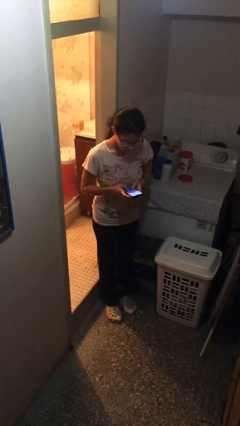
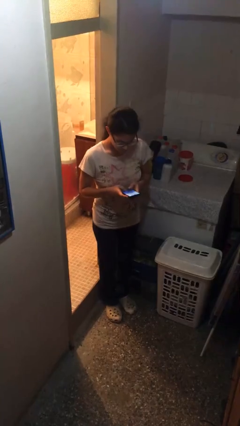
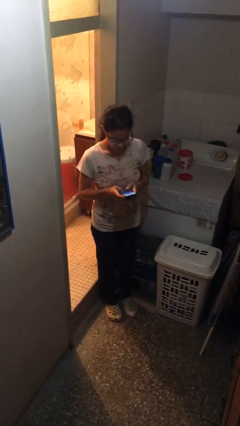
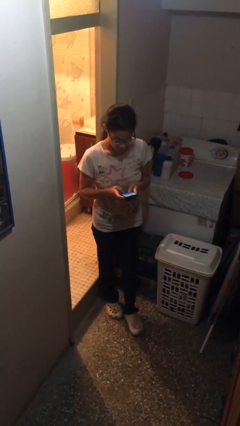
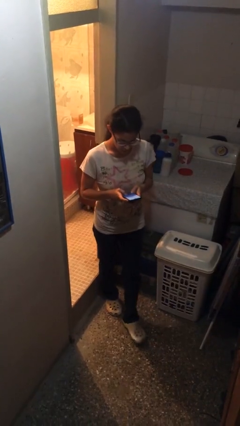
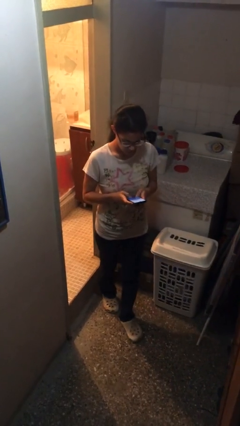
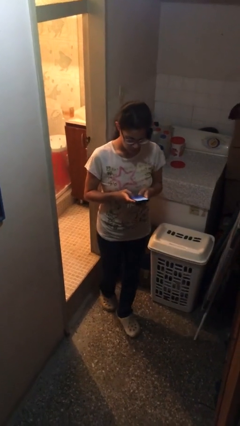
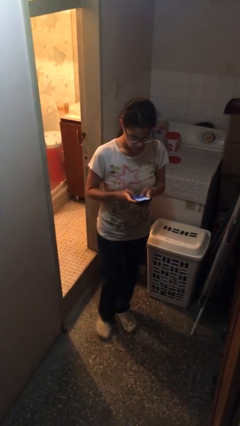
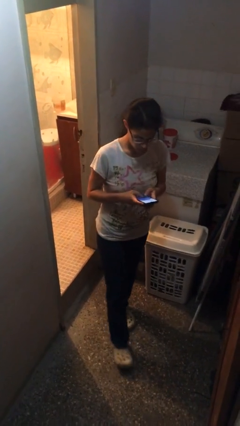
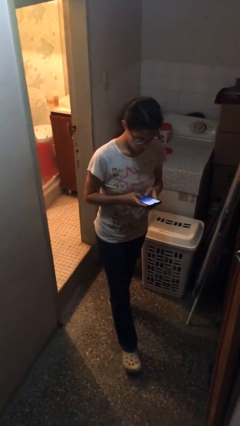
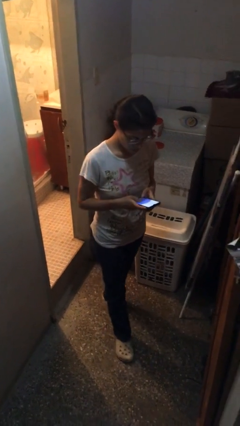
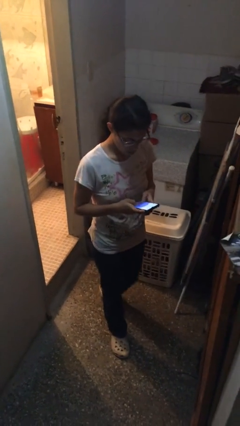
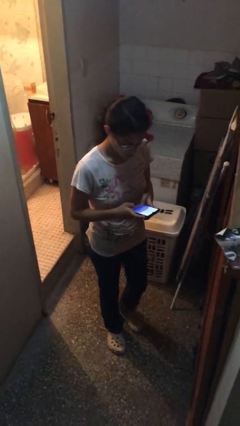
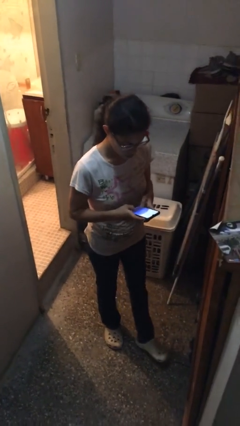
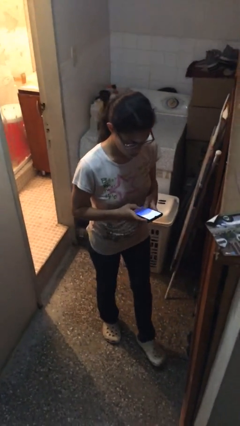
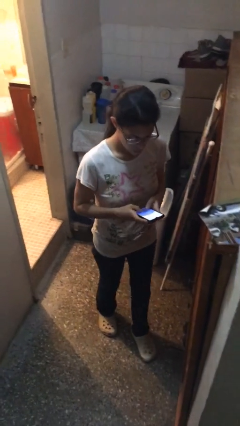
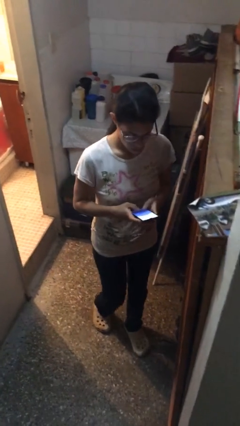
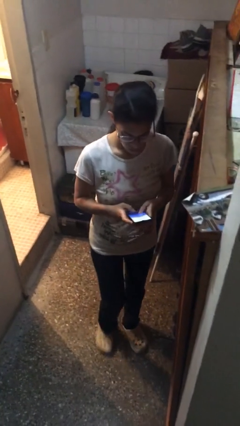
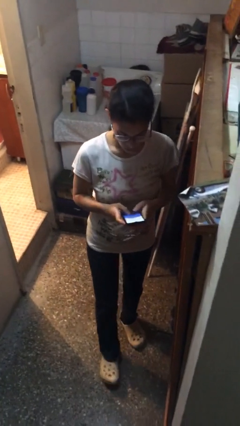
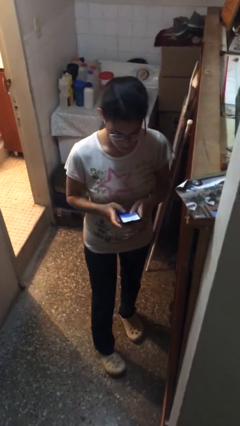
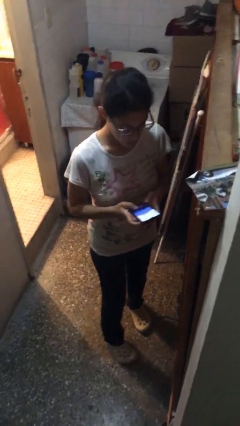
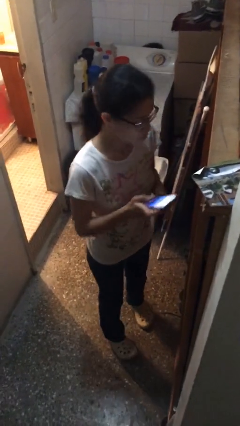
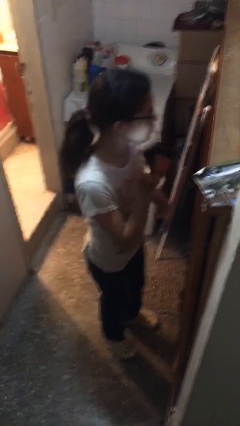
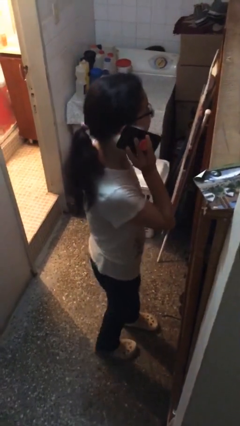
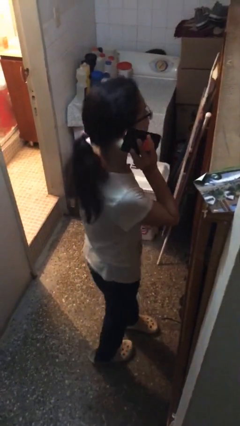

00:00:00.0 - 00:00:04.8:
person texts on phone

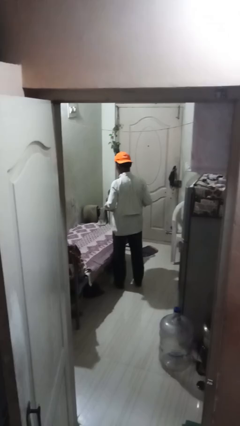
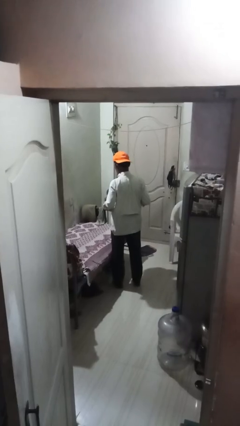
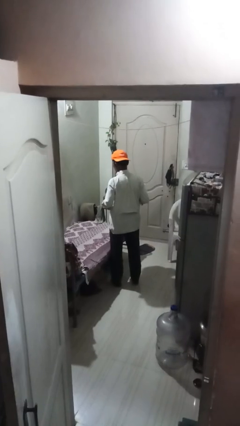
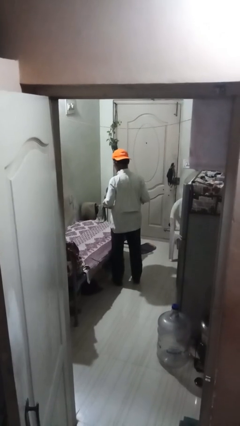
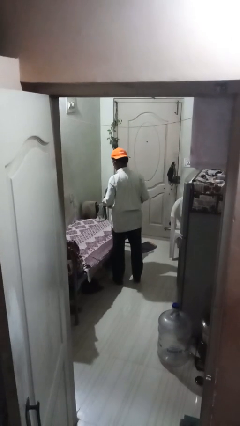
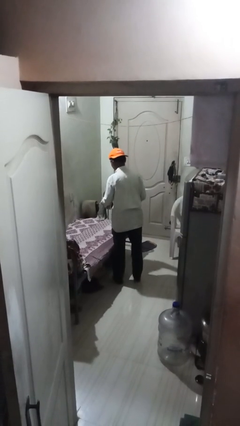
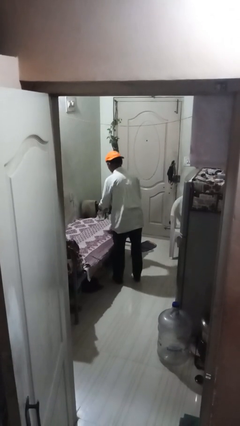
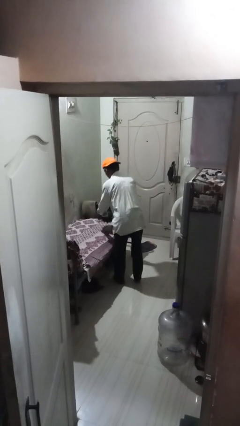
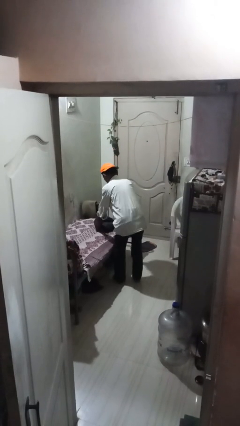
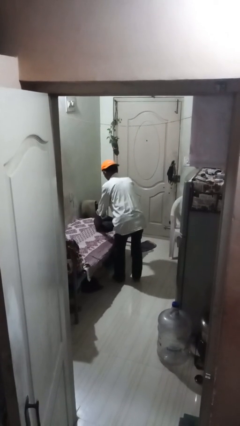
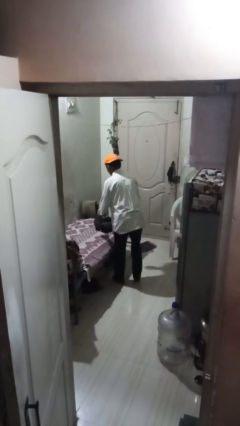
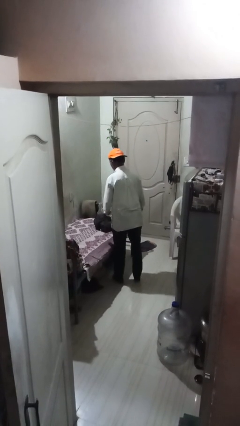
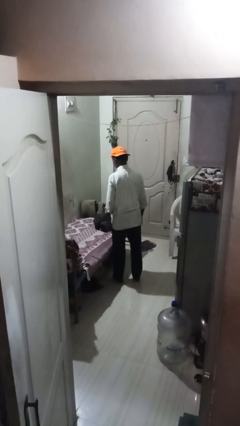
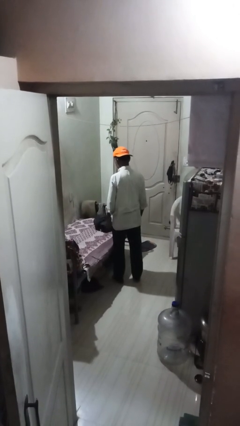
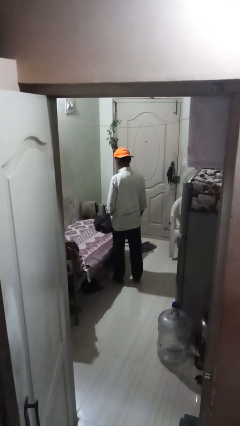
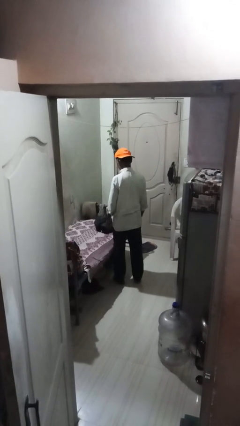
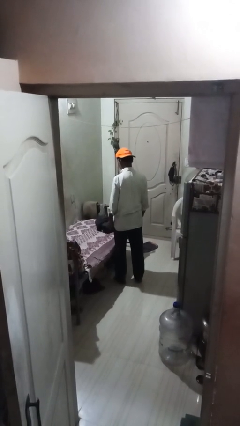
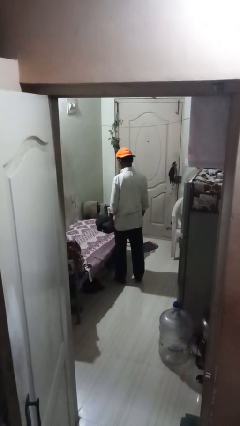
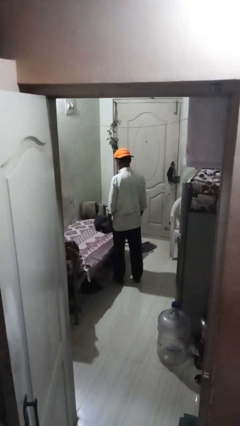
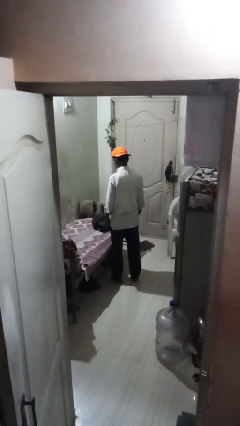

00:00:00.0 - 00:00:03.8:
person puts down object on bed

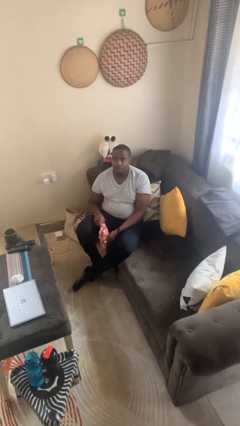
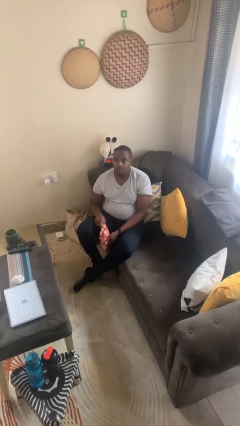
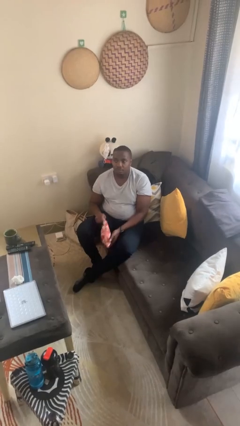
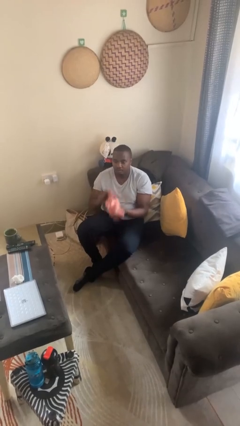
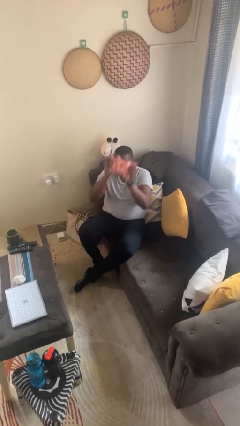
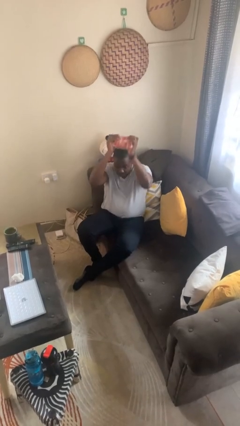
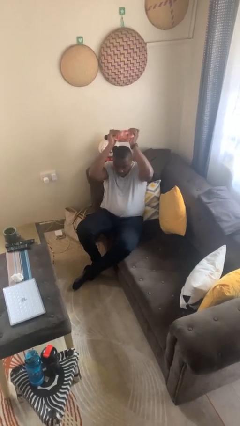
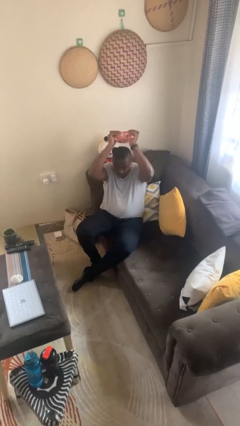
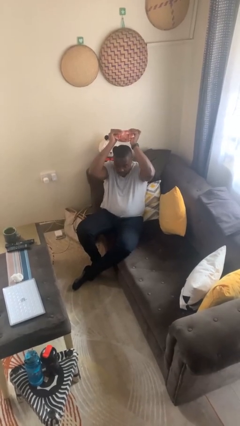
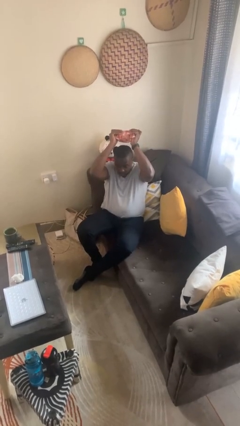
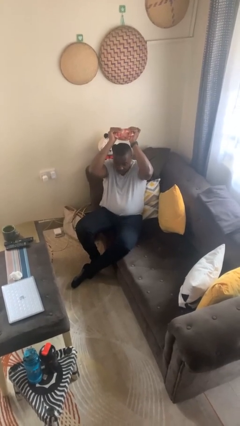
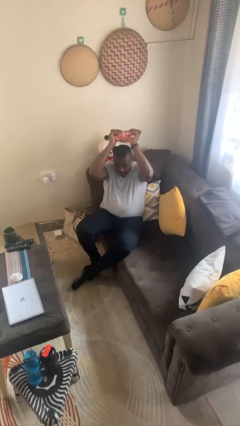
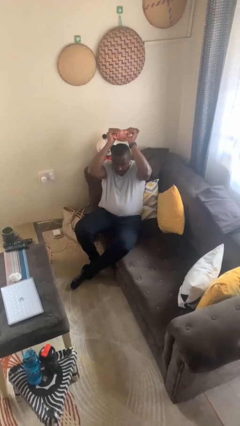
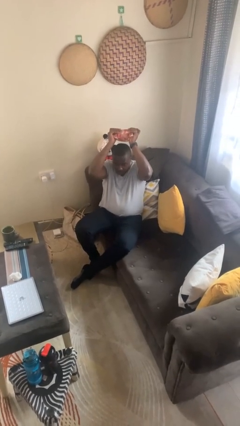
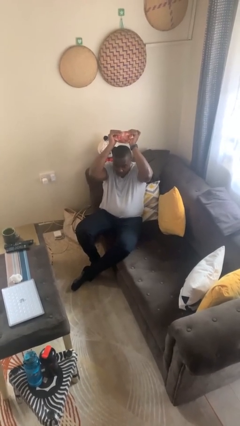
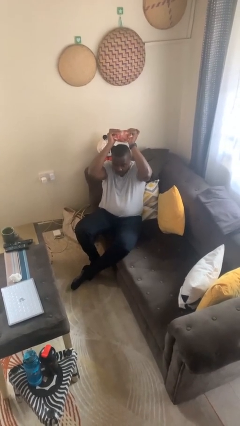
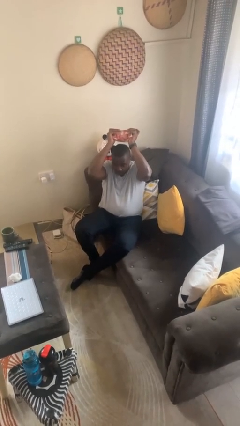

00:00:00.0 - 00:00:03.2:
person holds object above head

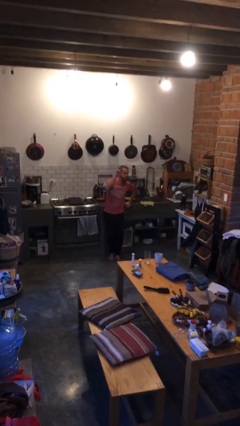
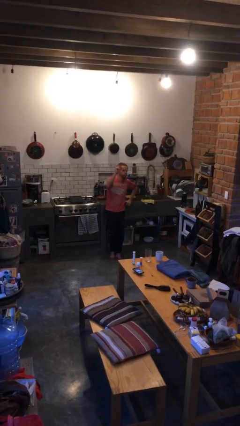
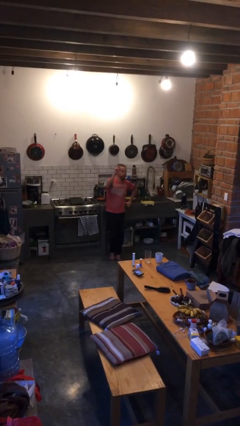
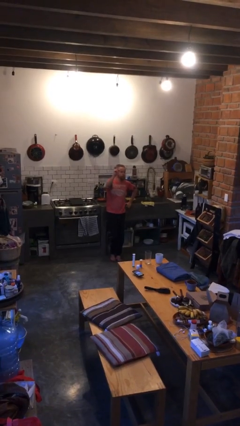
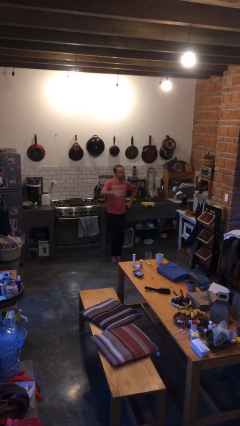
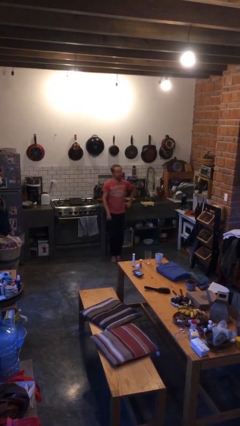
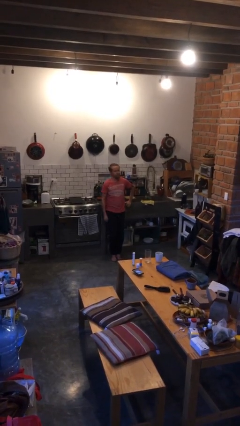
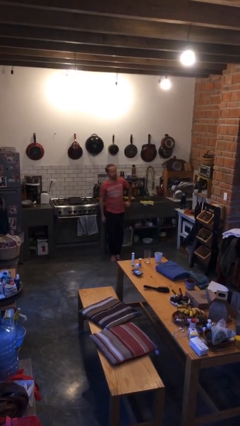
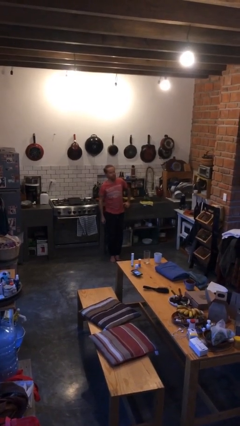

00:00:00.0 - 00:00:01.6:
person gestures lower hand

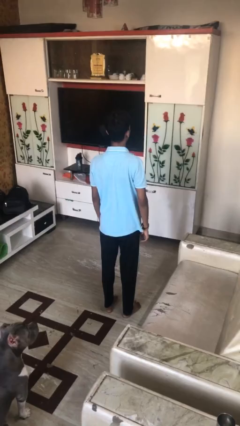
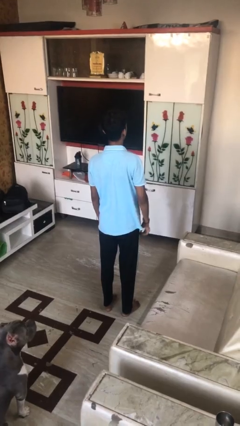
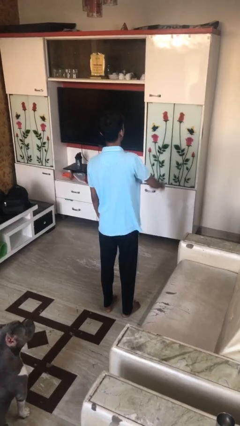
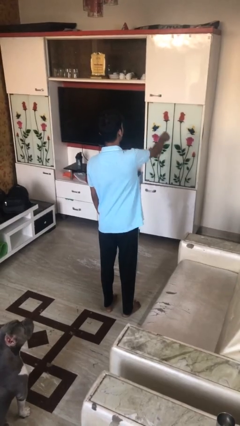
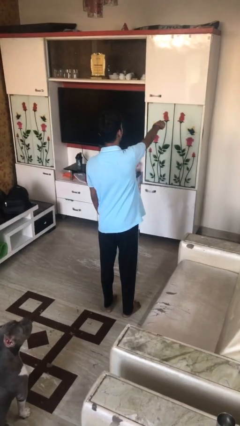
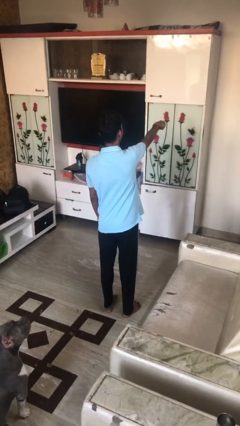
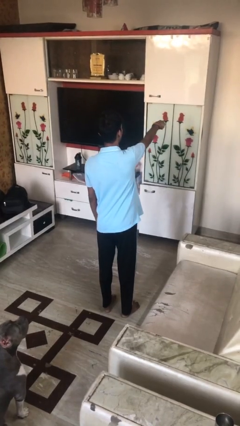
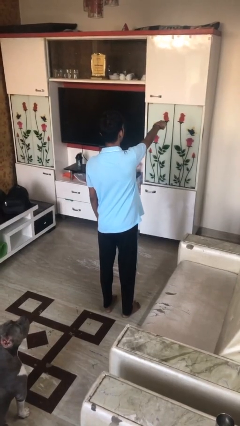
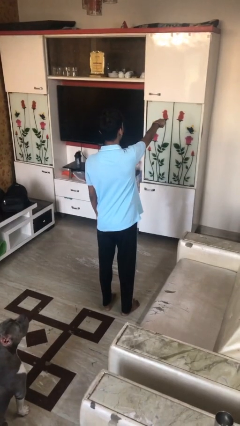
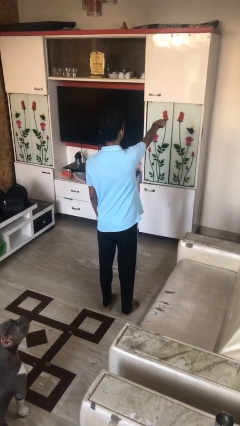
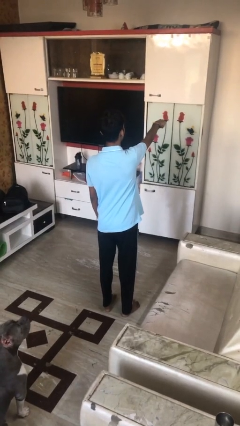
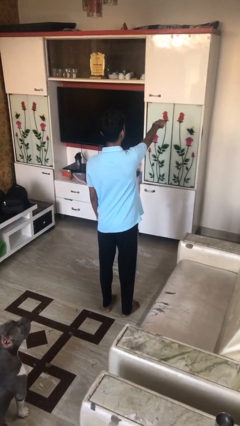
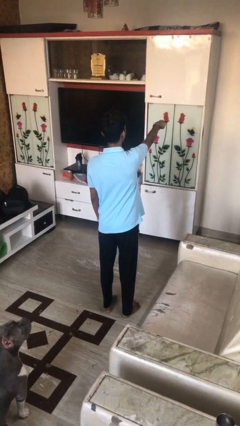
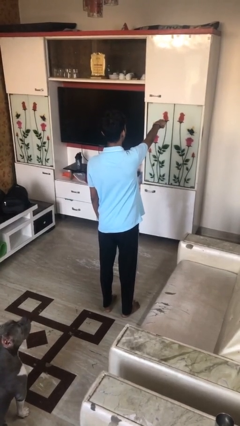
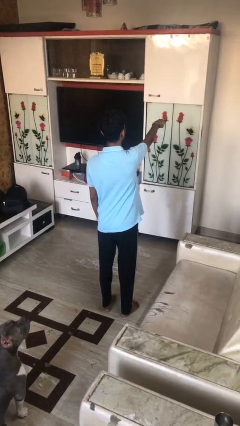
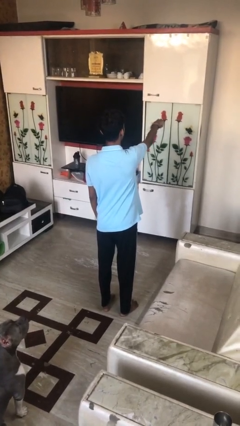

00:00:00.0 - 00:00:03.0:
person points at person

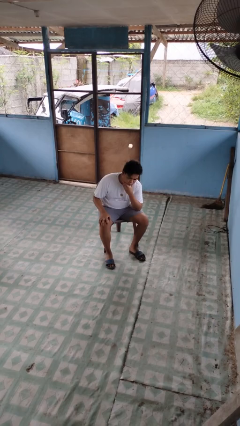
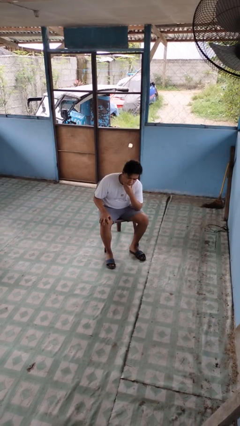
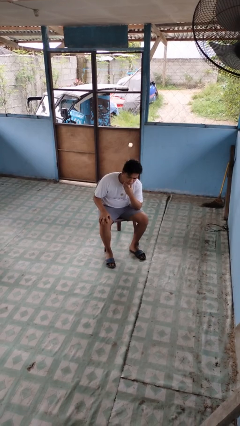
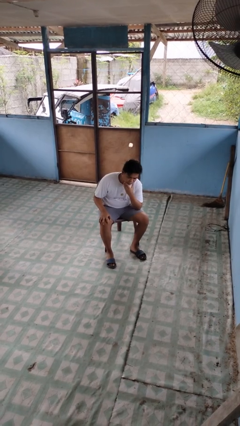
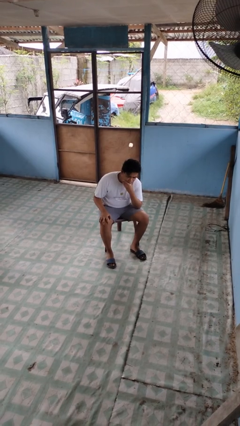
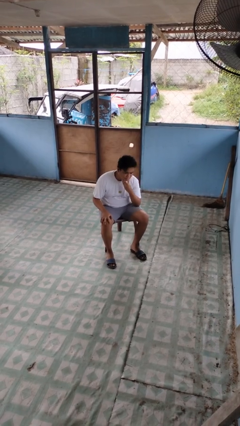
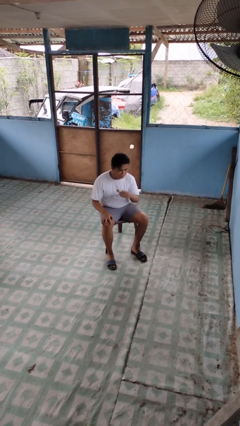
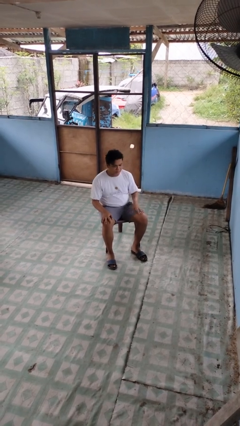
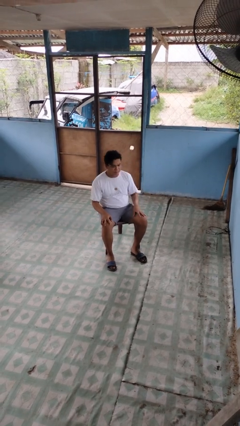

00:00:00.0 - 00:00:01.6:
person strokes chin
